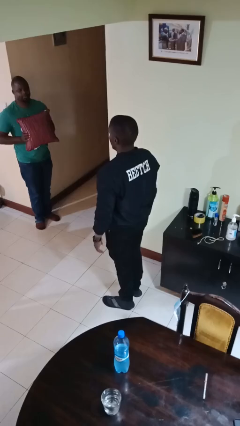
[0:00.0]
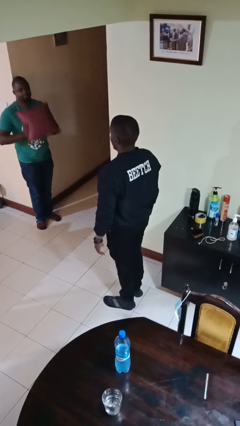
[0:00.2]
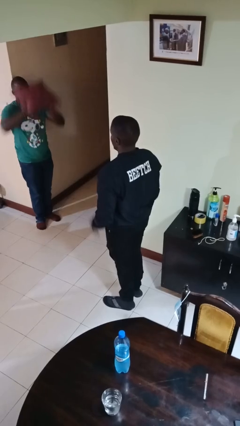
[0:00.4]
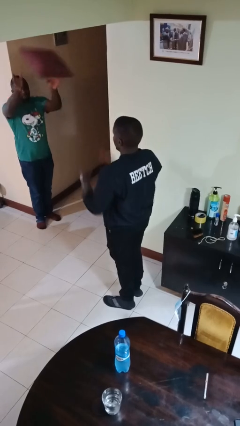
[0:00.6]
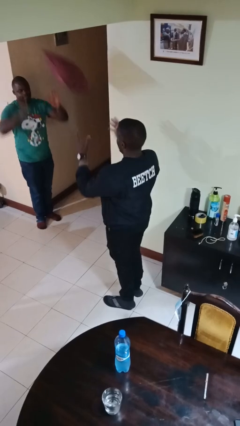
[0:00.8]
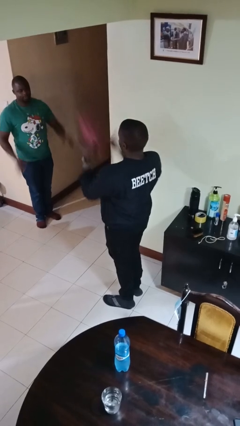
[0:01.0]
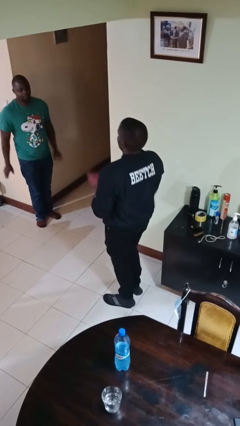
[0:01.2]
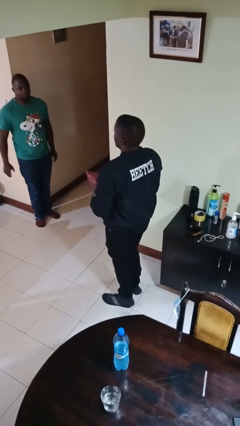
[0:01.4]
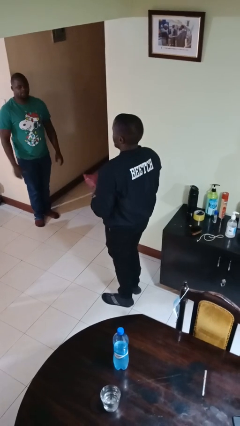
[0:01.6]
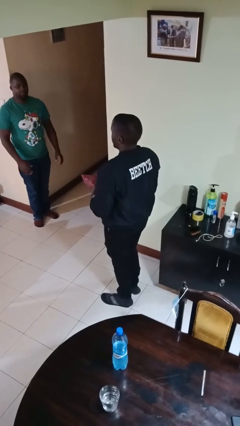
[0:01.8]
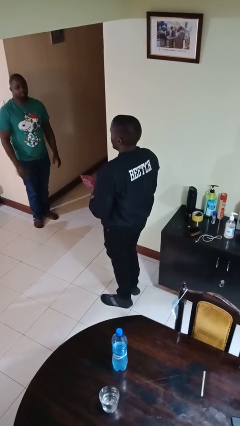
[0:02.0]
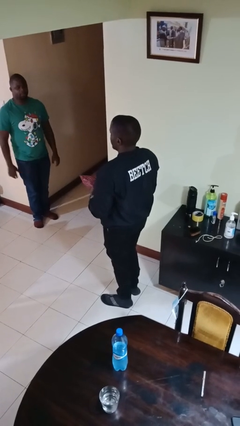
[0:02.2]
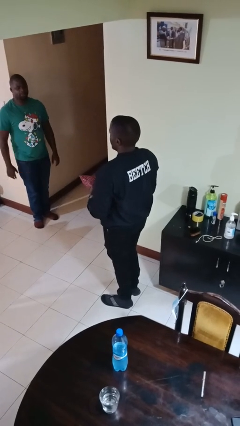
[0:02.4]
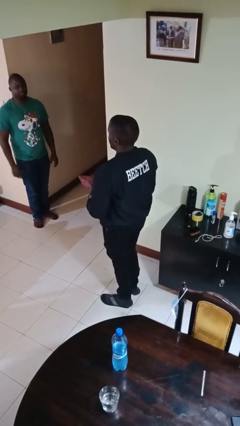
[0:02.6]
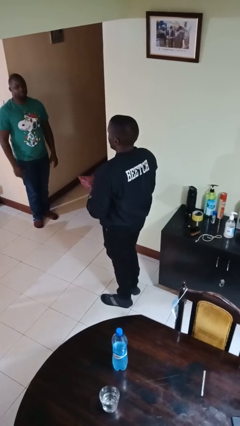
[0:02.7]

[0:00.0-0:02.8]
person catches object from person

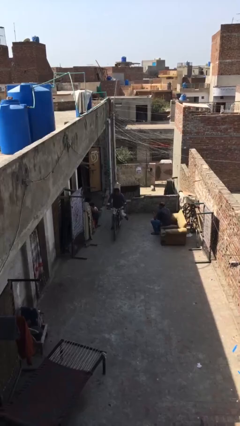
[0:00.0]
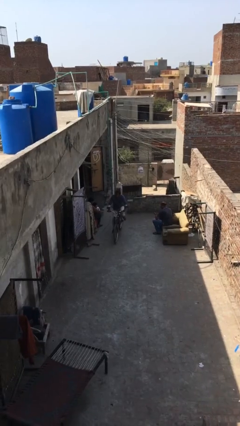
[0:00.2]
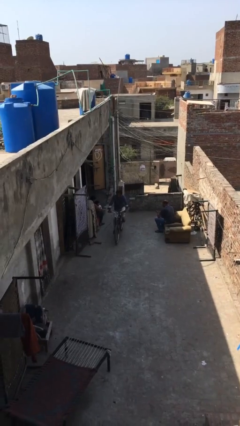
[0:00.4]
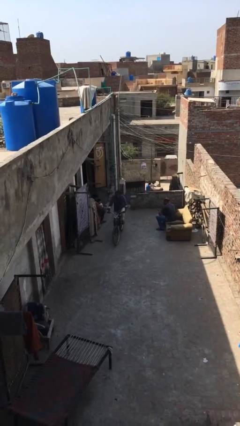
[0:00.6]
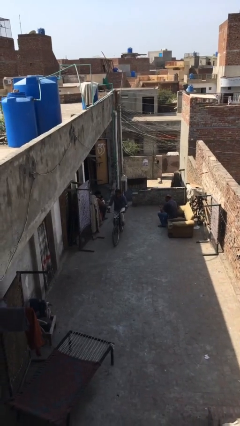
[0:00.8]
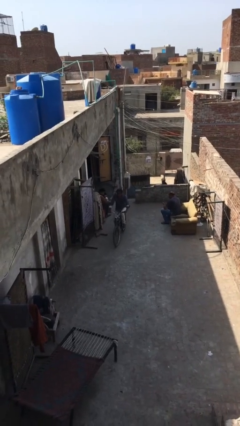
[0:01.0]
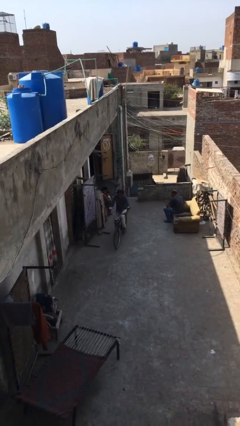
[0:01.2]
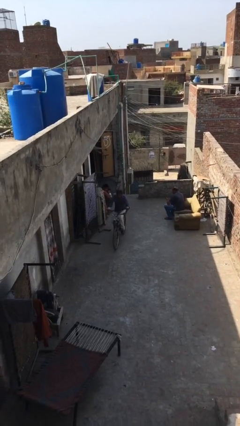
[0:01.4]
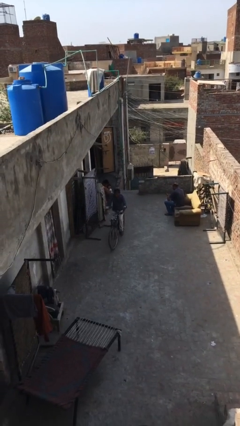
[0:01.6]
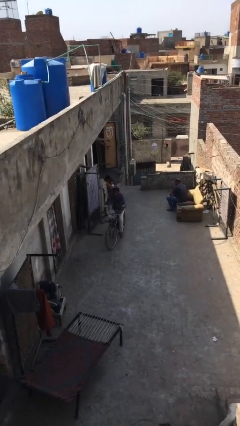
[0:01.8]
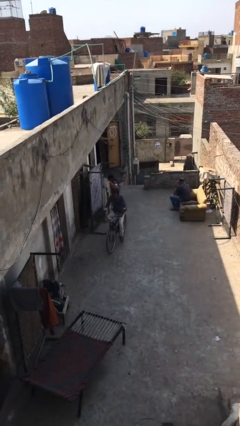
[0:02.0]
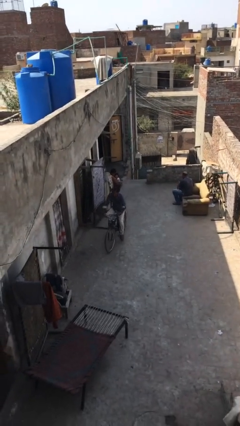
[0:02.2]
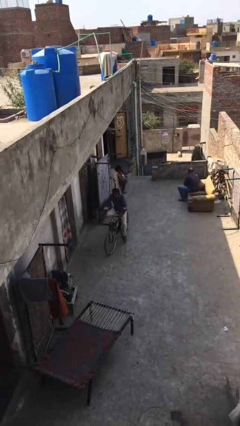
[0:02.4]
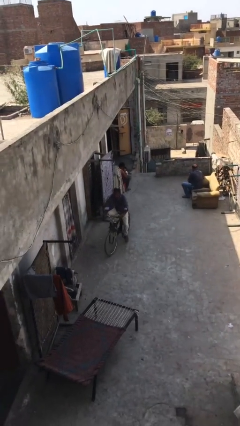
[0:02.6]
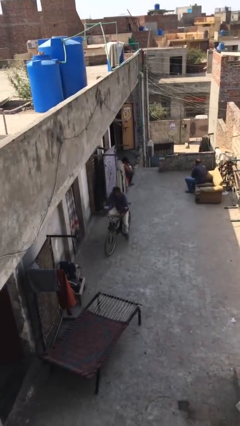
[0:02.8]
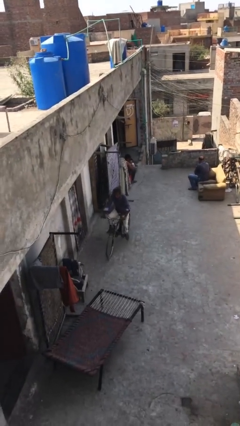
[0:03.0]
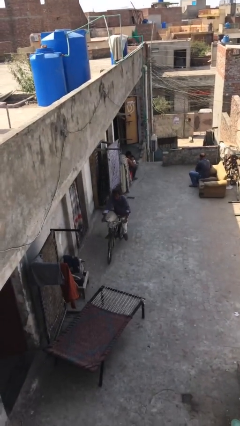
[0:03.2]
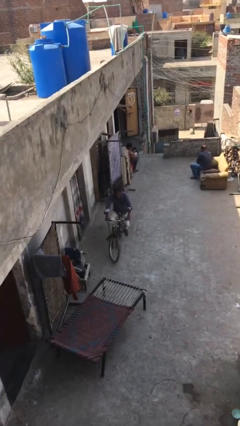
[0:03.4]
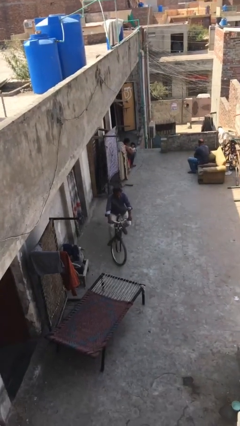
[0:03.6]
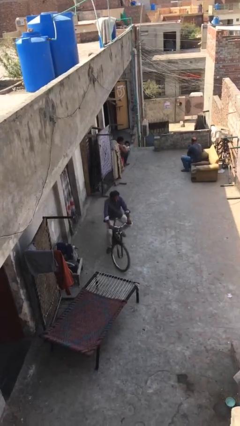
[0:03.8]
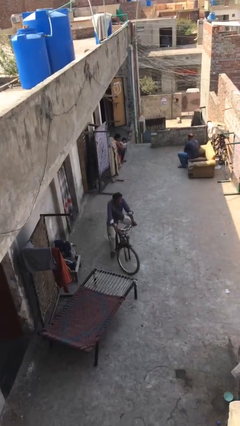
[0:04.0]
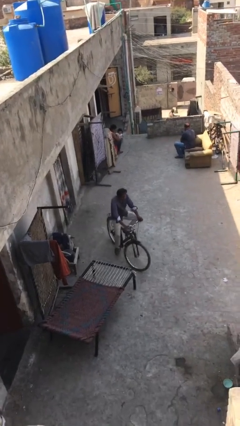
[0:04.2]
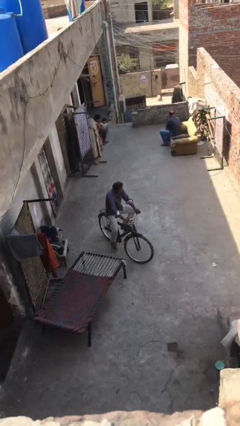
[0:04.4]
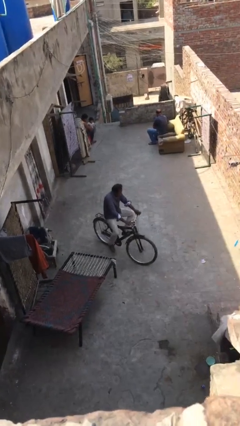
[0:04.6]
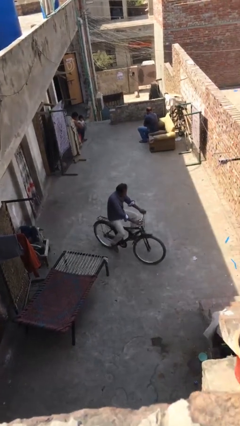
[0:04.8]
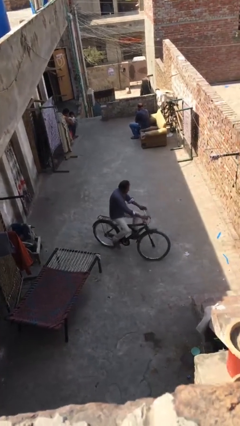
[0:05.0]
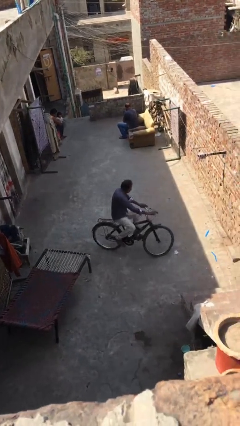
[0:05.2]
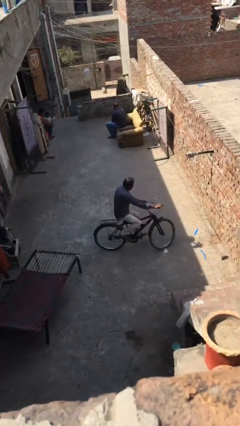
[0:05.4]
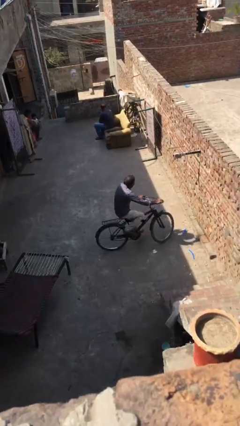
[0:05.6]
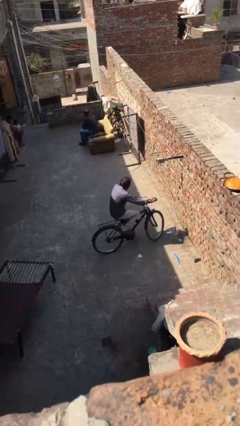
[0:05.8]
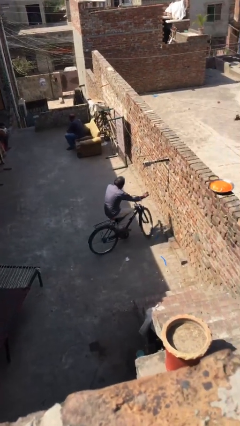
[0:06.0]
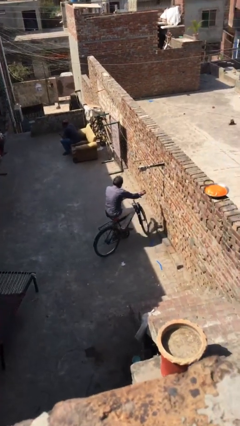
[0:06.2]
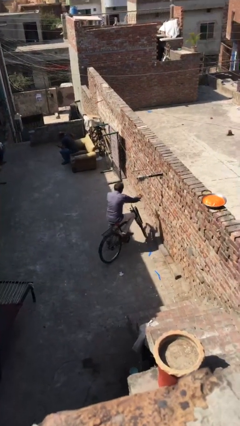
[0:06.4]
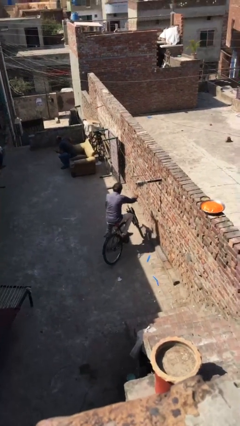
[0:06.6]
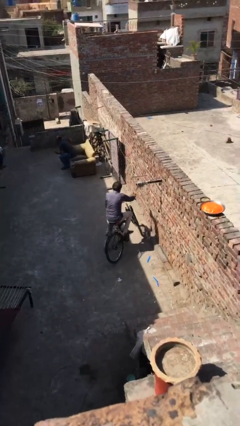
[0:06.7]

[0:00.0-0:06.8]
person rides bicycle

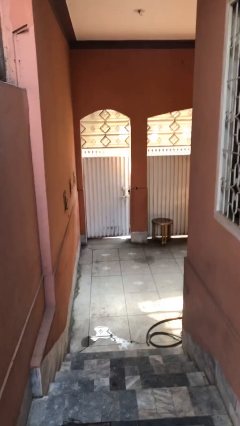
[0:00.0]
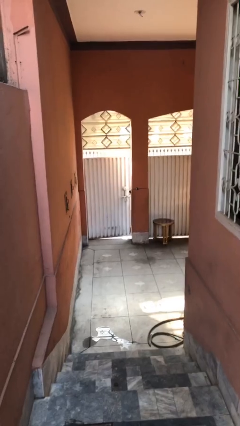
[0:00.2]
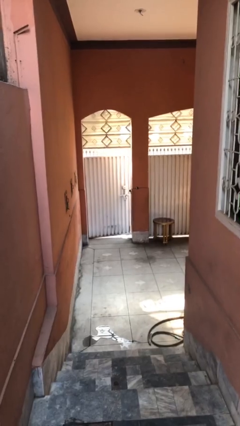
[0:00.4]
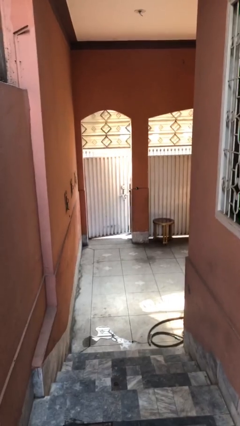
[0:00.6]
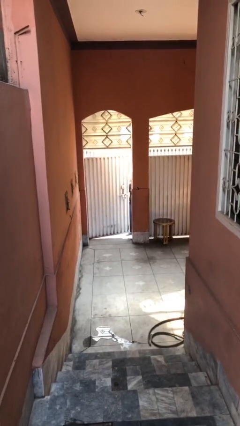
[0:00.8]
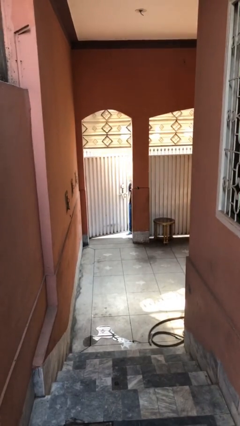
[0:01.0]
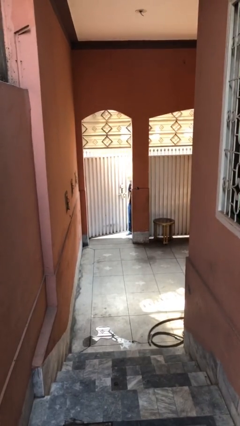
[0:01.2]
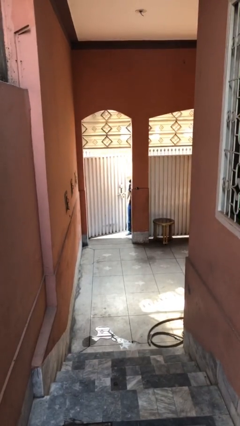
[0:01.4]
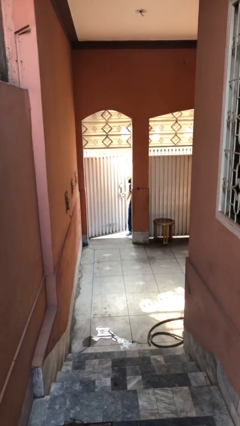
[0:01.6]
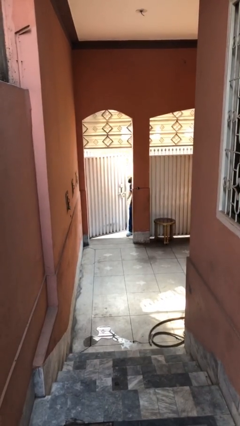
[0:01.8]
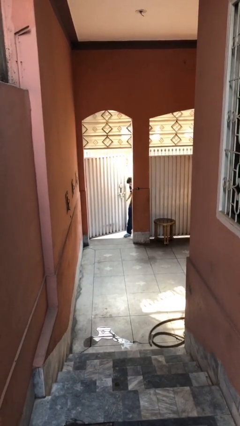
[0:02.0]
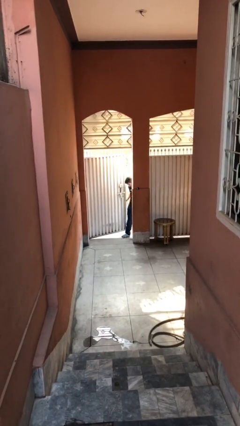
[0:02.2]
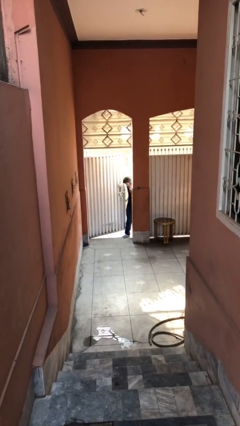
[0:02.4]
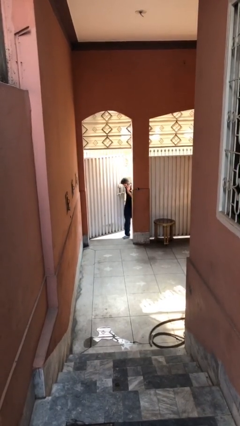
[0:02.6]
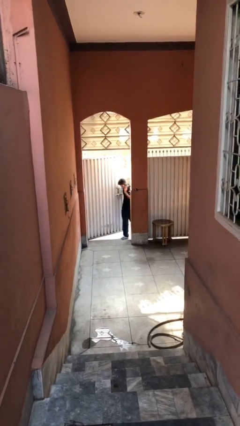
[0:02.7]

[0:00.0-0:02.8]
person opens facility door

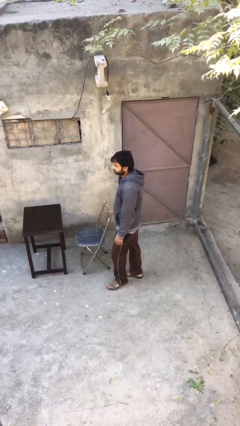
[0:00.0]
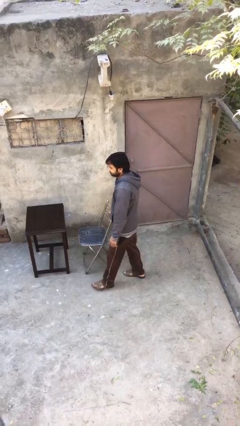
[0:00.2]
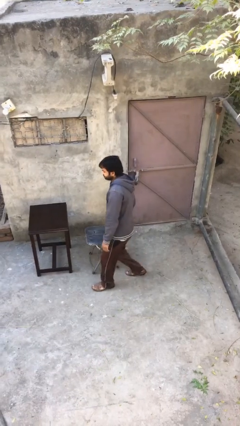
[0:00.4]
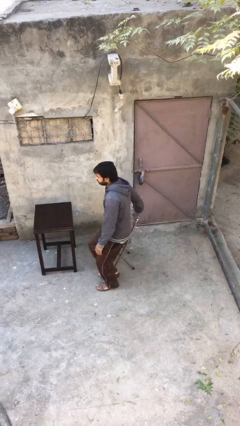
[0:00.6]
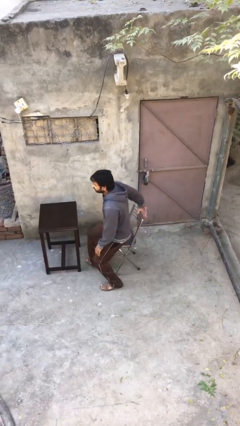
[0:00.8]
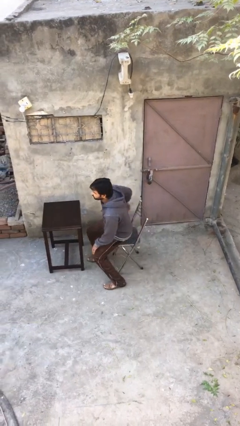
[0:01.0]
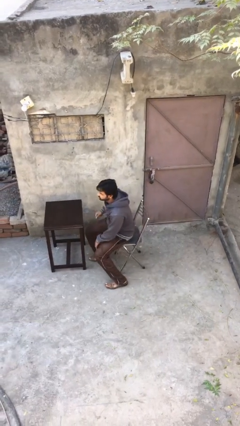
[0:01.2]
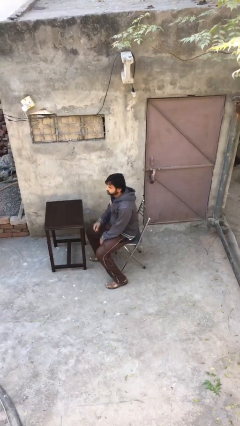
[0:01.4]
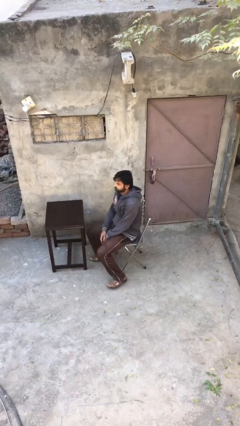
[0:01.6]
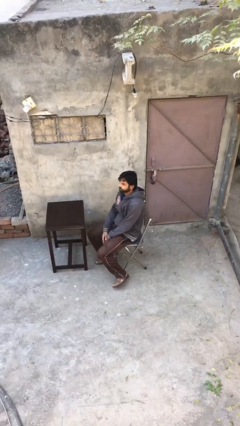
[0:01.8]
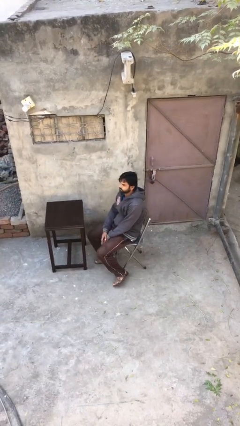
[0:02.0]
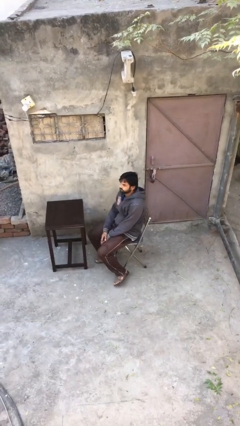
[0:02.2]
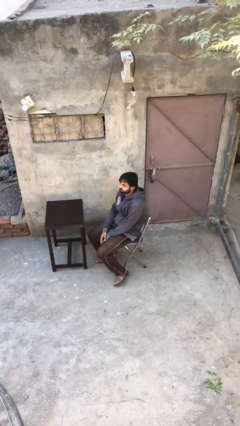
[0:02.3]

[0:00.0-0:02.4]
person sits down

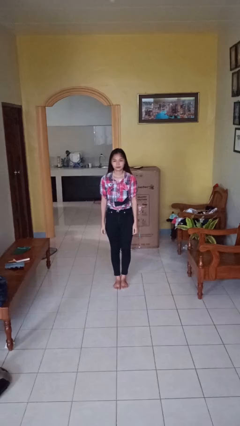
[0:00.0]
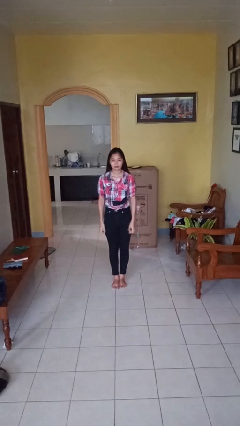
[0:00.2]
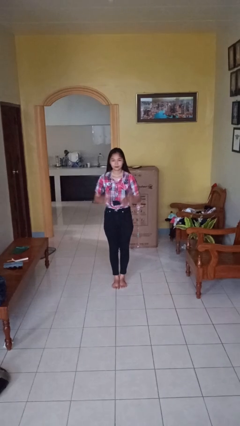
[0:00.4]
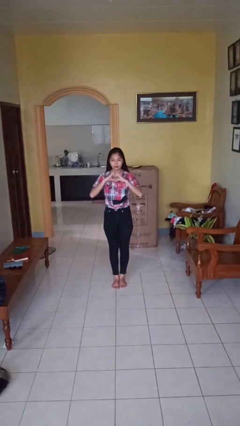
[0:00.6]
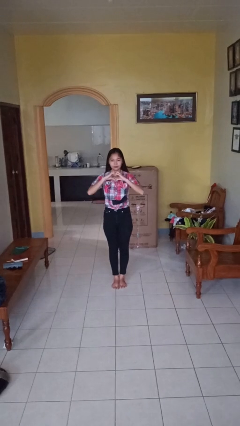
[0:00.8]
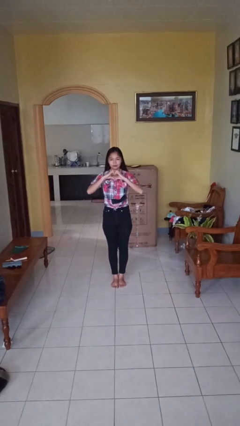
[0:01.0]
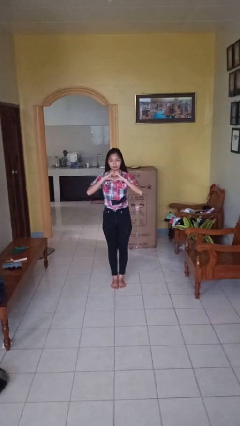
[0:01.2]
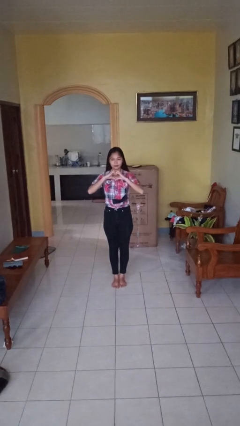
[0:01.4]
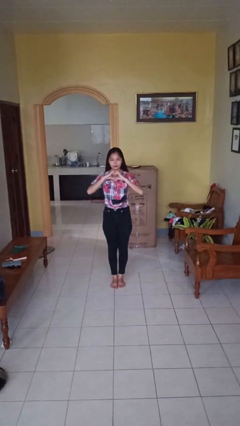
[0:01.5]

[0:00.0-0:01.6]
person gestures heart

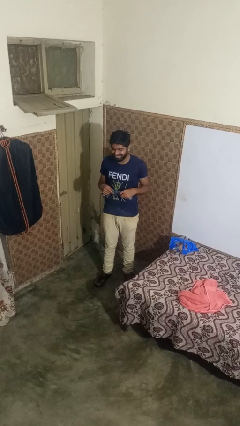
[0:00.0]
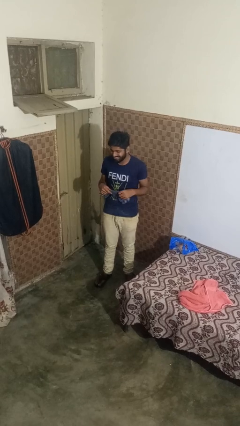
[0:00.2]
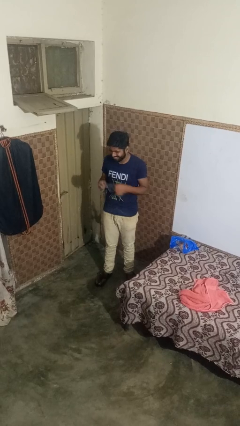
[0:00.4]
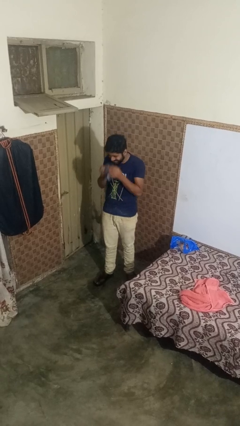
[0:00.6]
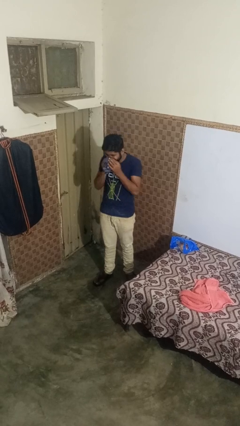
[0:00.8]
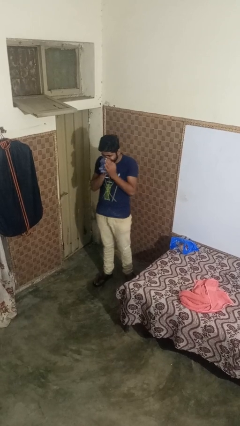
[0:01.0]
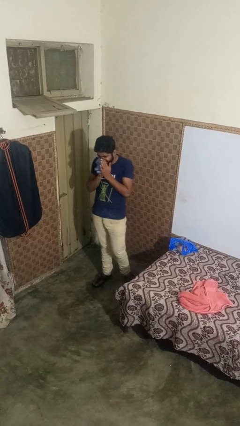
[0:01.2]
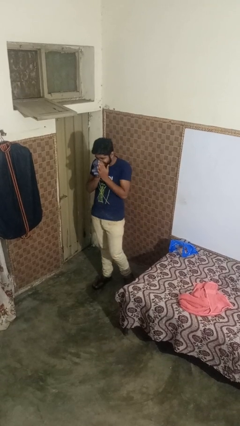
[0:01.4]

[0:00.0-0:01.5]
person blows nose
